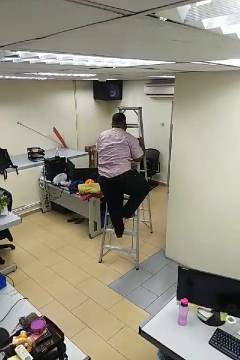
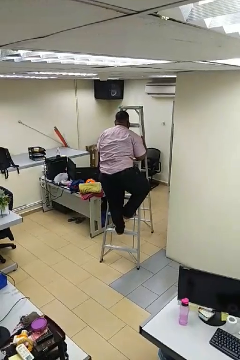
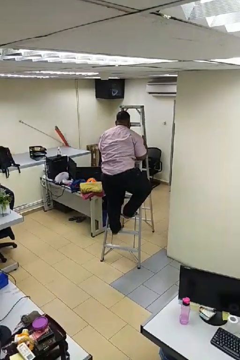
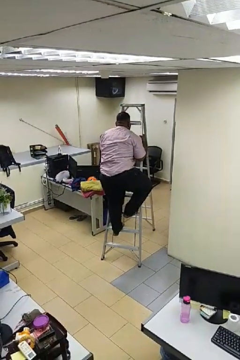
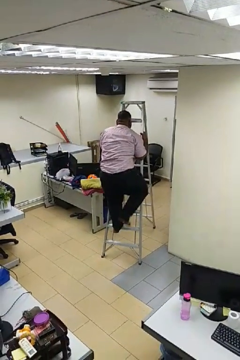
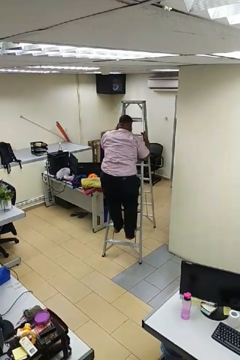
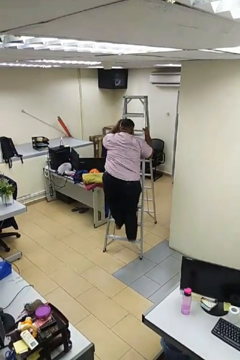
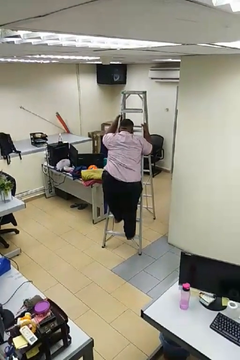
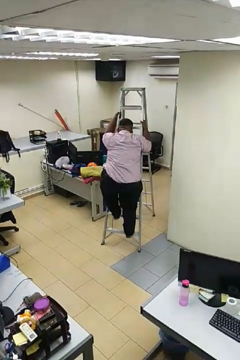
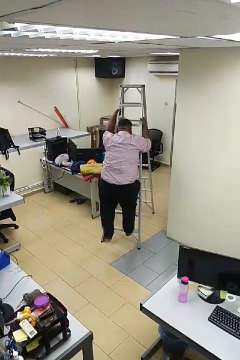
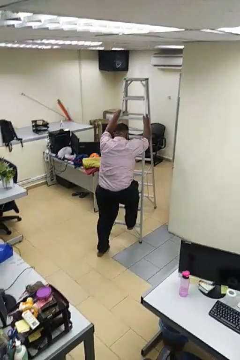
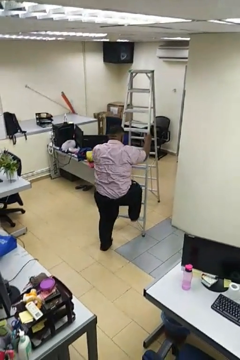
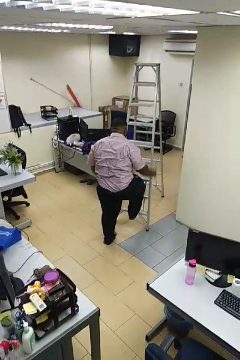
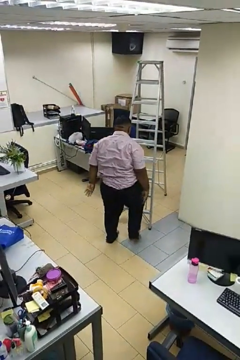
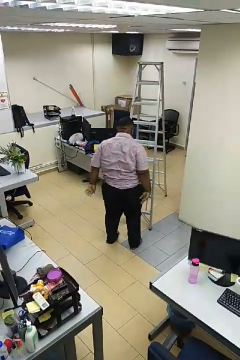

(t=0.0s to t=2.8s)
person climbs down ladder

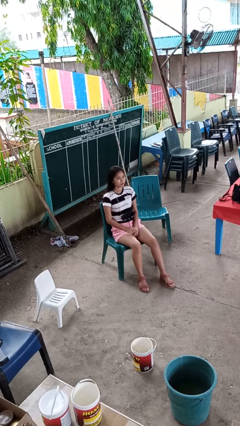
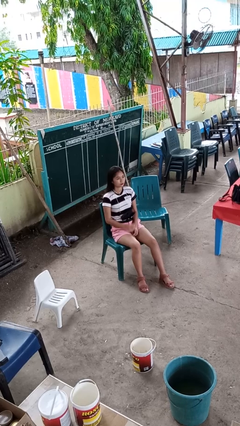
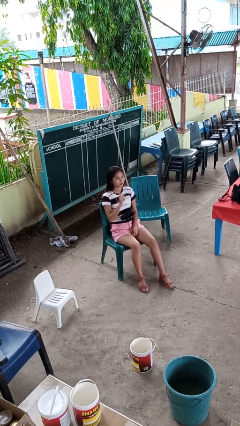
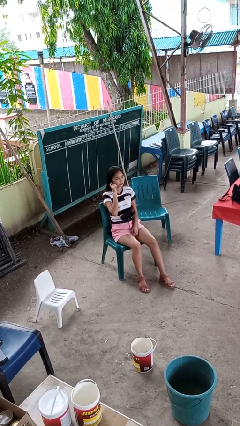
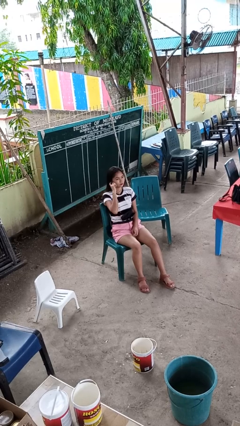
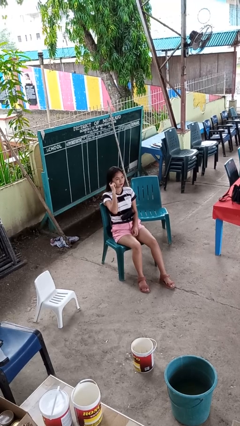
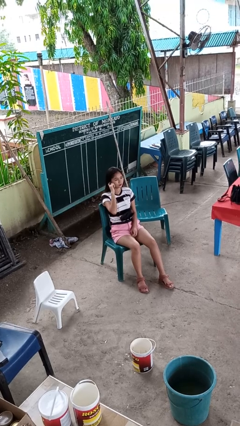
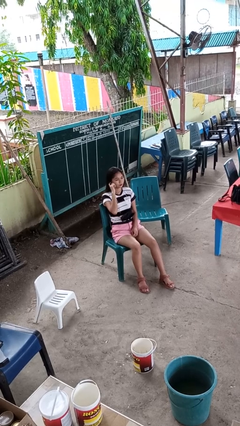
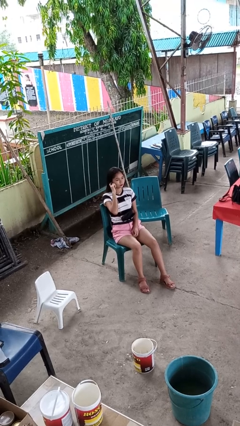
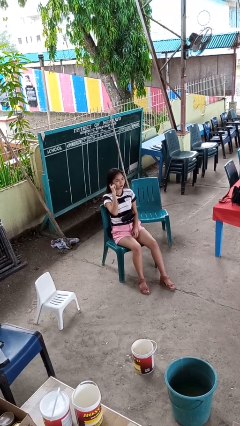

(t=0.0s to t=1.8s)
person gestures listen closely

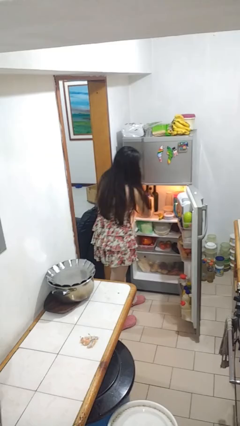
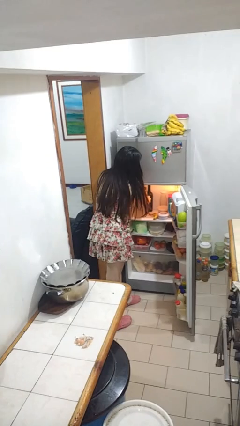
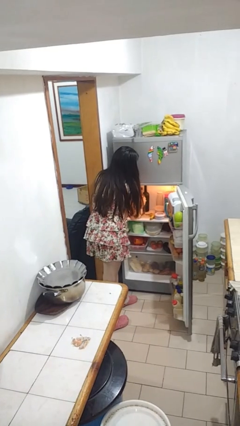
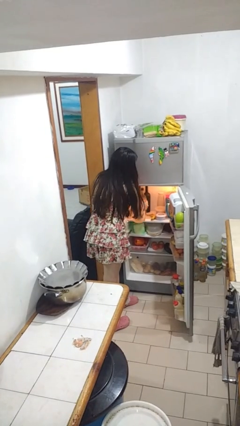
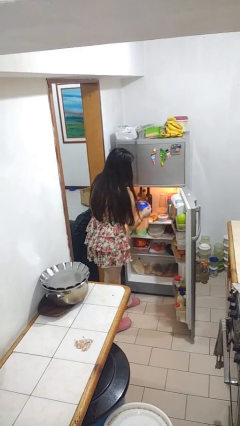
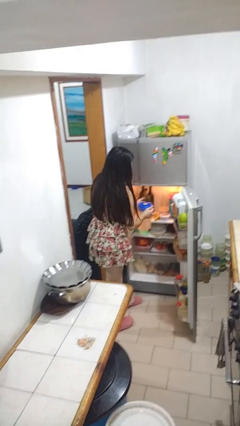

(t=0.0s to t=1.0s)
person takes object from refrigerator

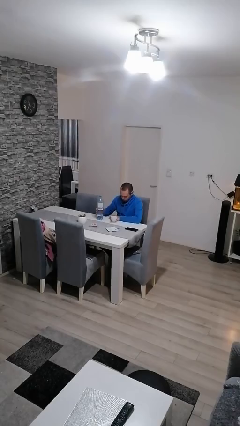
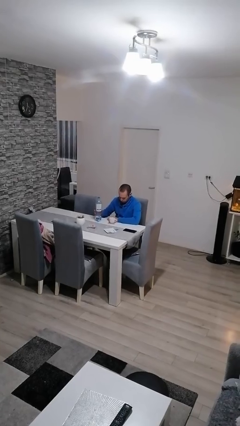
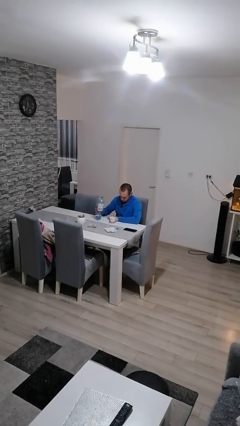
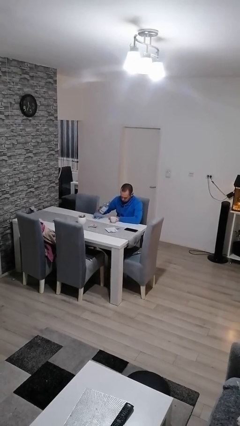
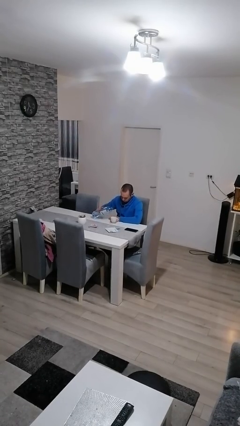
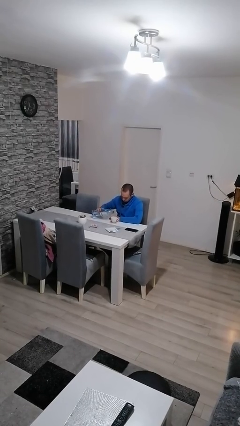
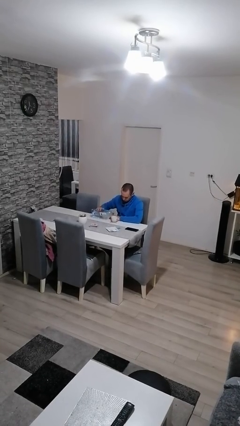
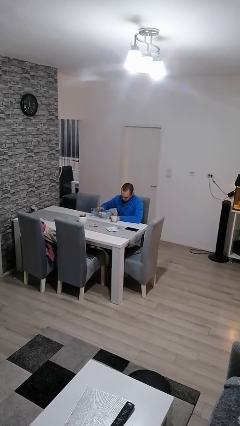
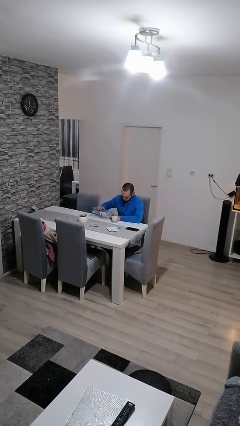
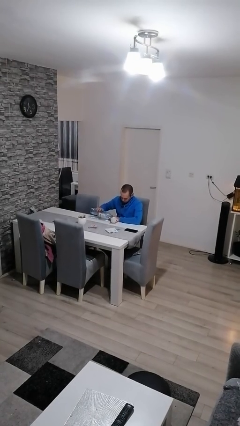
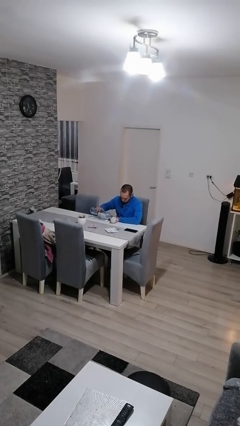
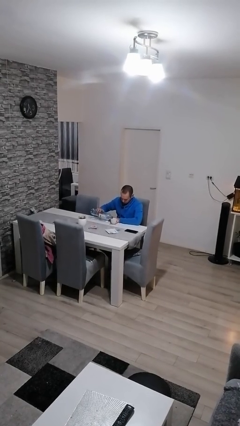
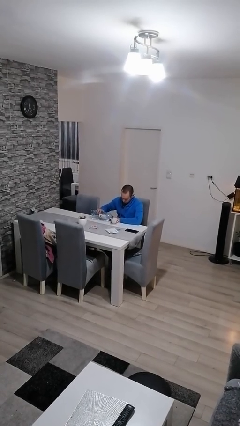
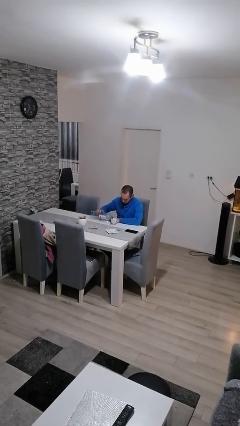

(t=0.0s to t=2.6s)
person pours liquid into cup

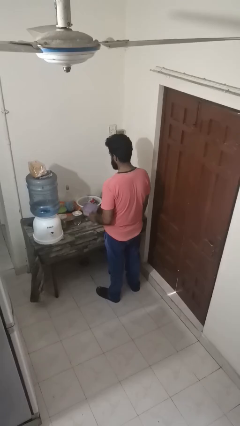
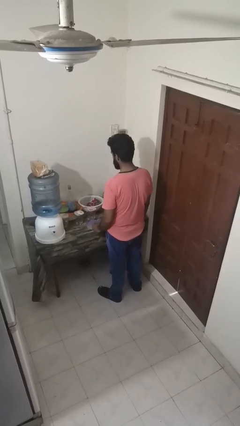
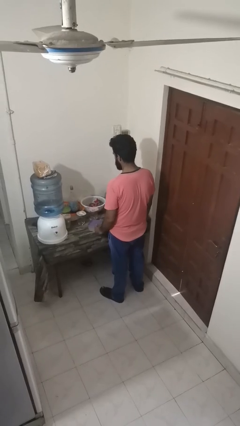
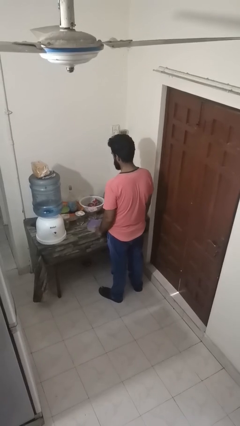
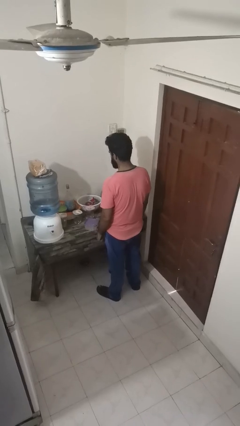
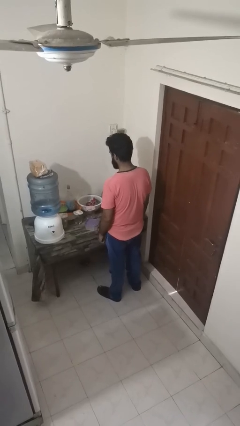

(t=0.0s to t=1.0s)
person puts down object on countertop

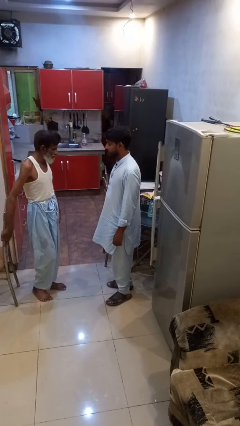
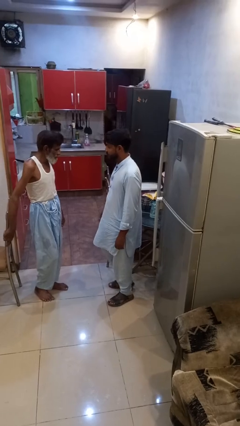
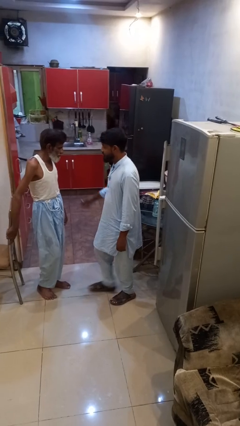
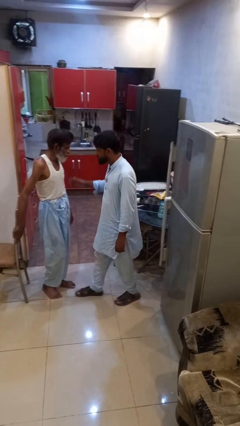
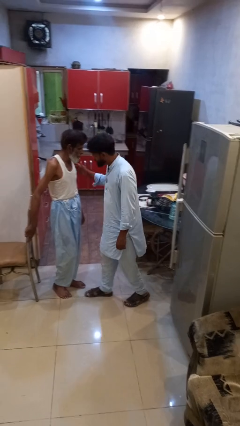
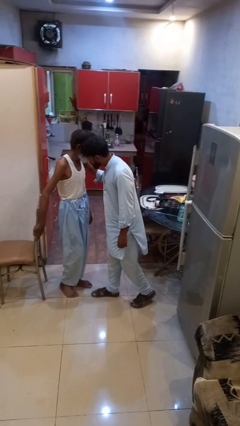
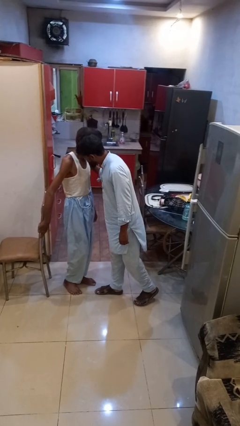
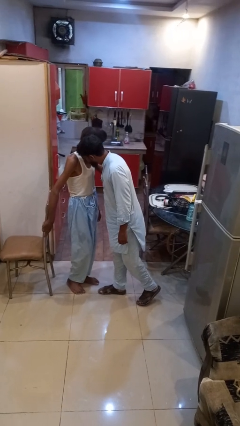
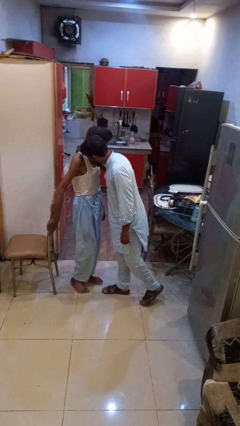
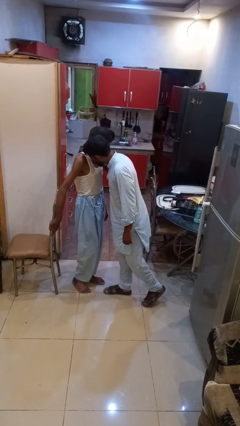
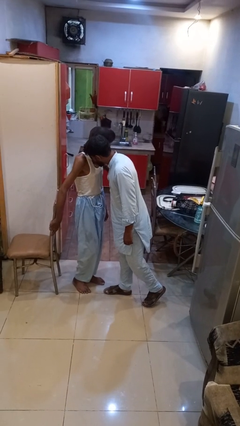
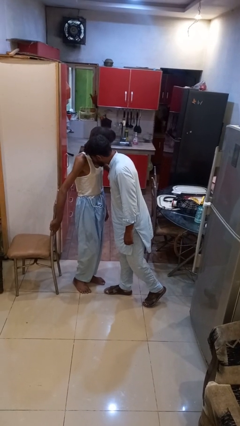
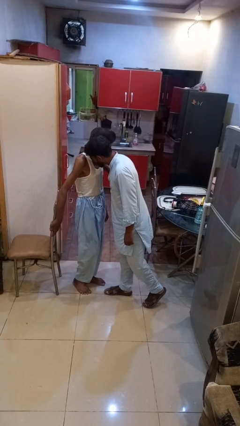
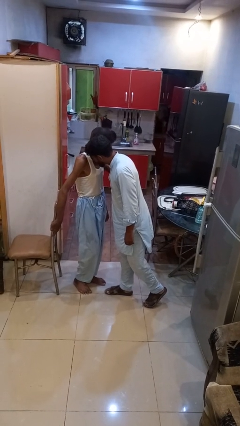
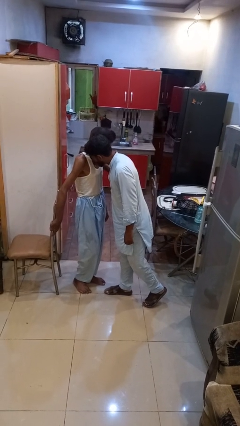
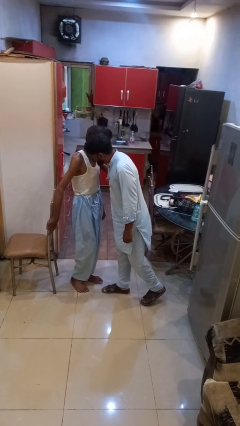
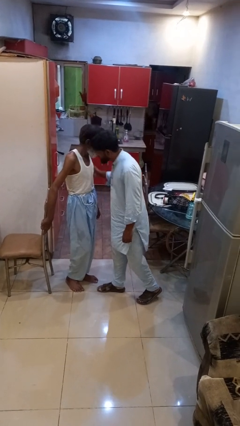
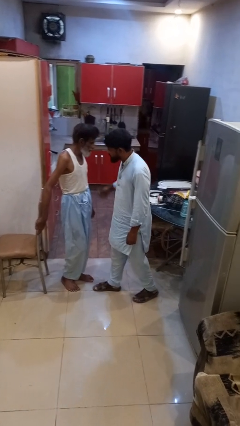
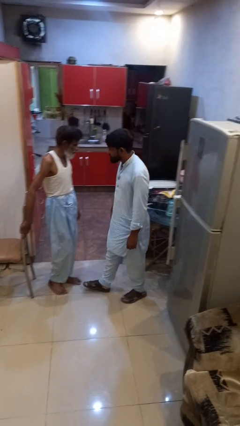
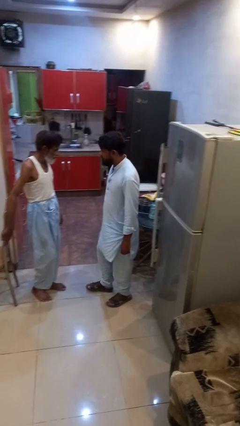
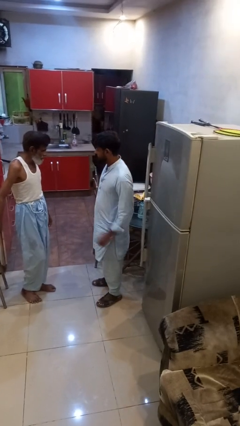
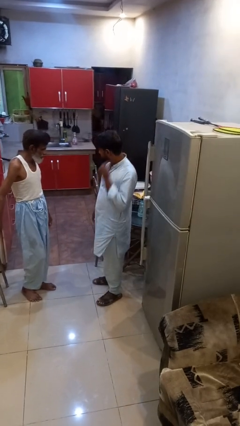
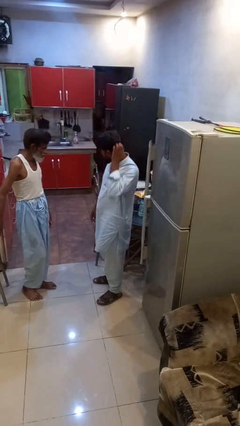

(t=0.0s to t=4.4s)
person kisses cheek of person

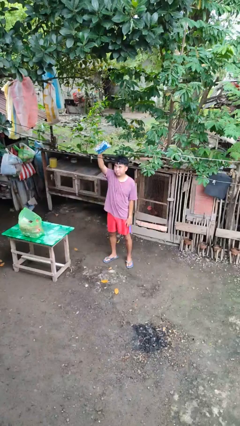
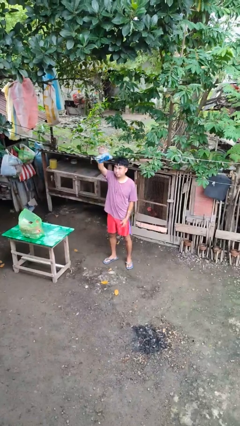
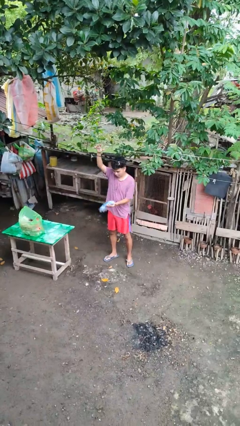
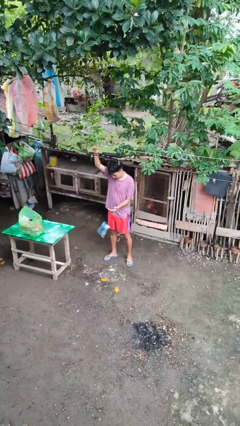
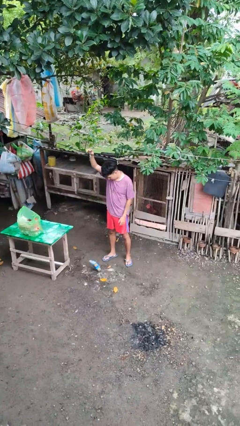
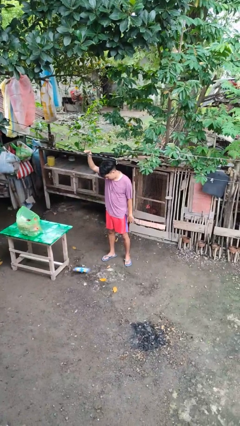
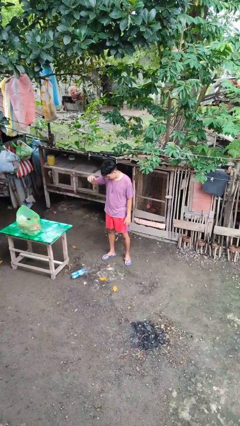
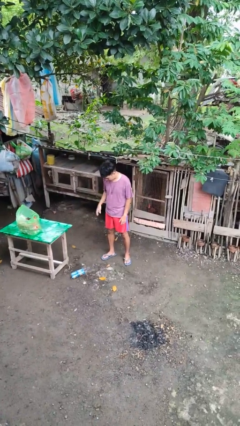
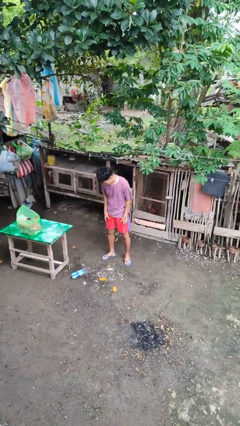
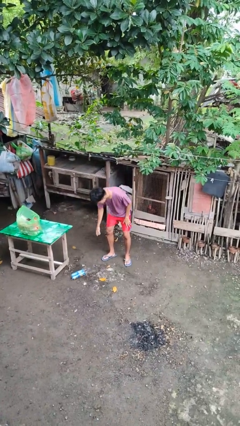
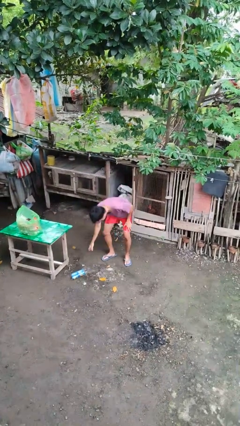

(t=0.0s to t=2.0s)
person drops object

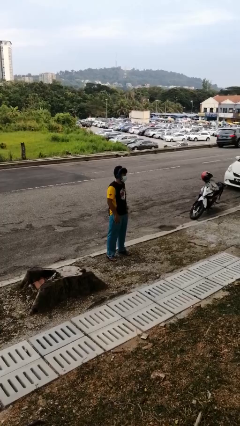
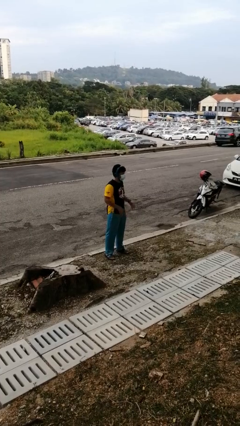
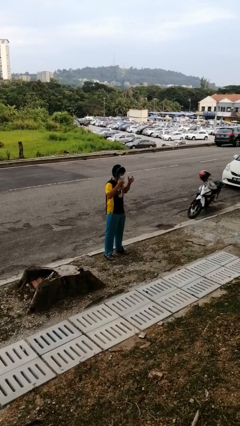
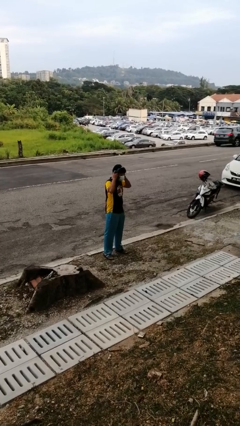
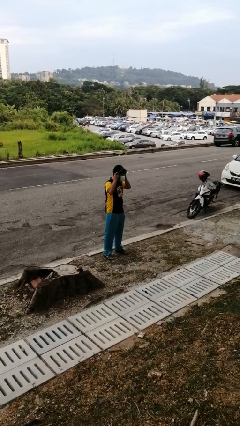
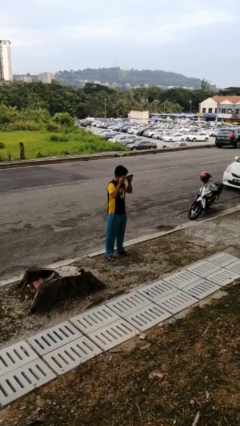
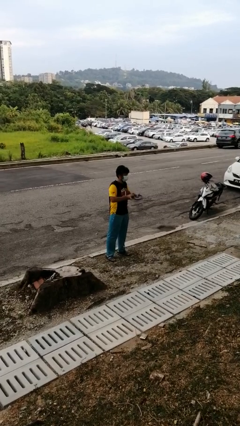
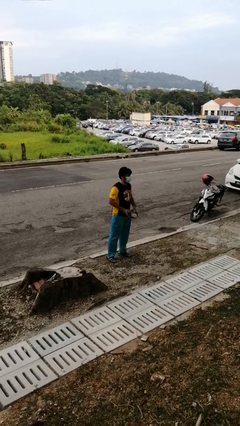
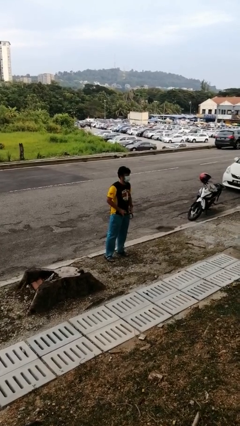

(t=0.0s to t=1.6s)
person takes off headphones
